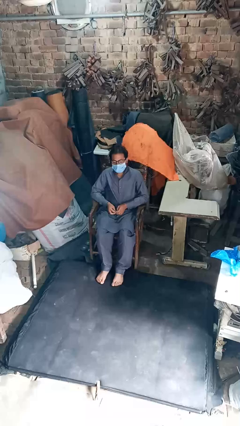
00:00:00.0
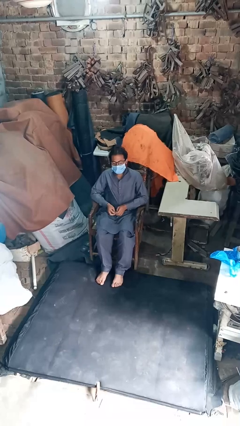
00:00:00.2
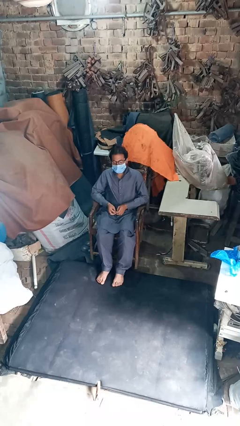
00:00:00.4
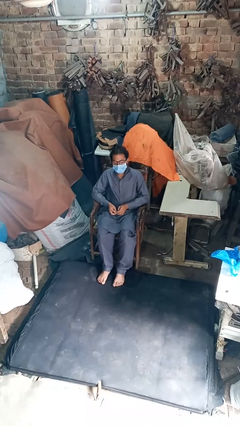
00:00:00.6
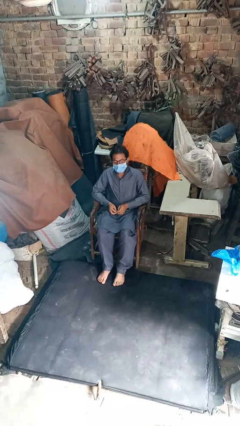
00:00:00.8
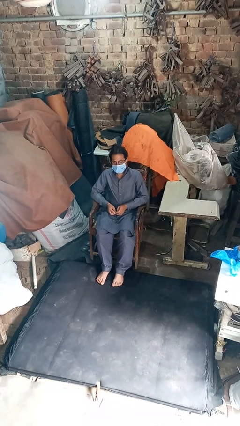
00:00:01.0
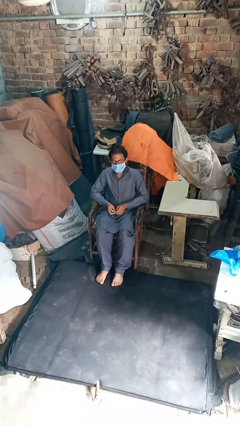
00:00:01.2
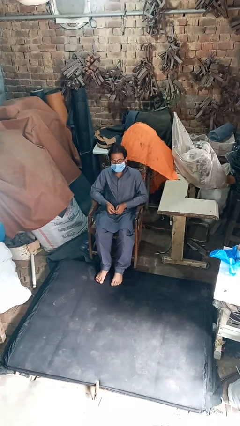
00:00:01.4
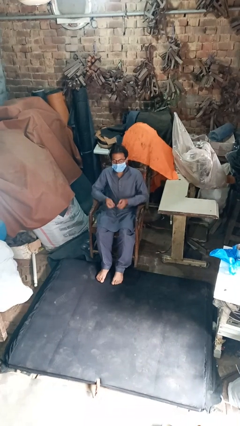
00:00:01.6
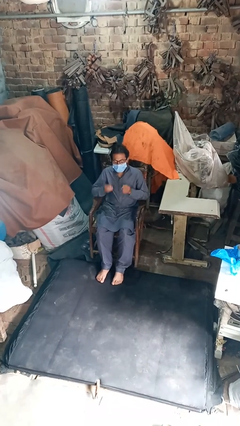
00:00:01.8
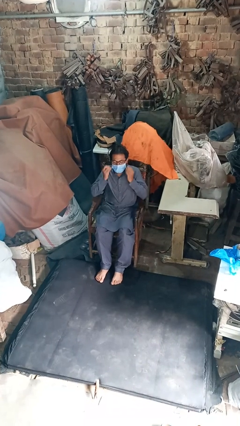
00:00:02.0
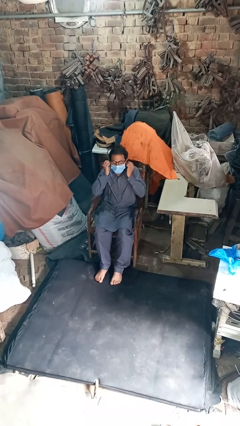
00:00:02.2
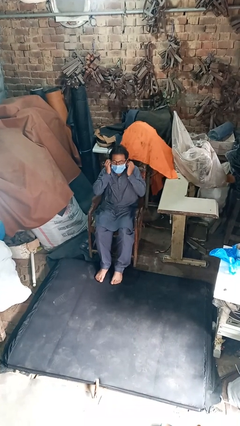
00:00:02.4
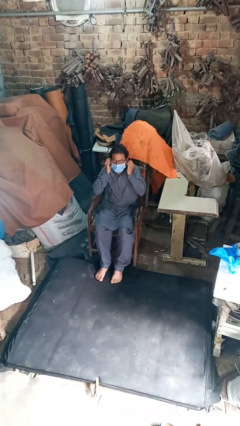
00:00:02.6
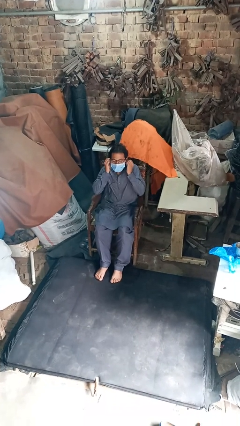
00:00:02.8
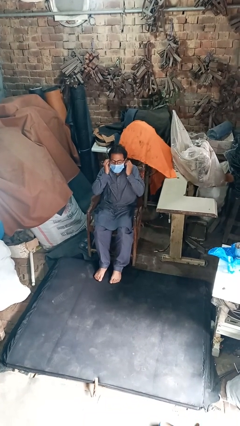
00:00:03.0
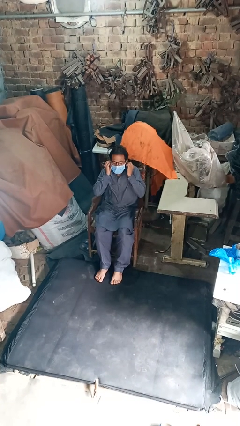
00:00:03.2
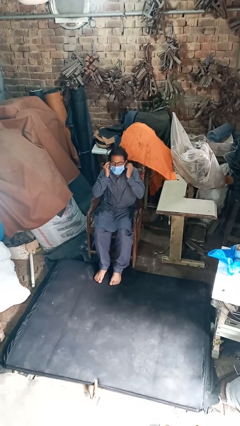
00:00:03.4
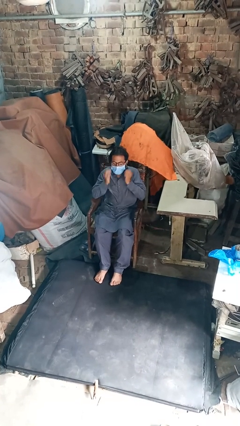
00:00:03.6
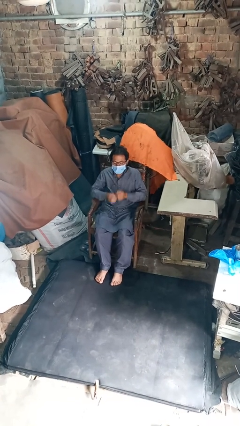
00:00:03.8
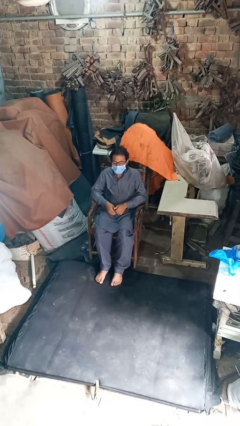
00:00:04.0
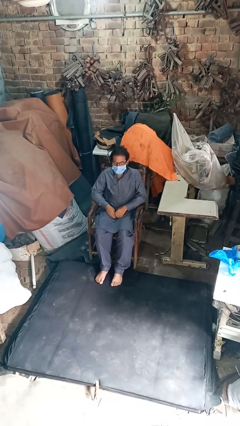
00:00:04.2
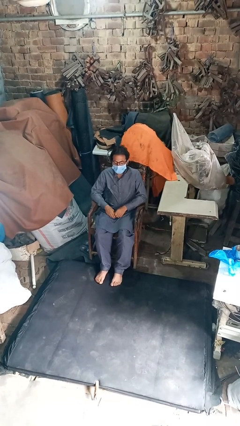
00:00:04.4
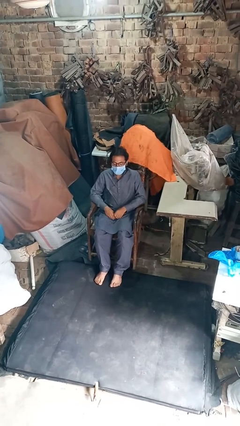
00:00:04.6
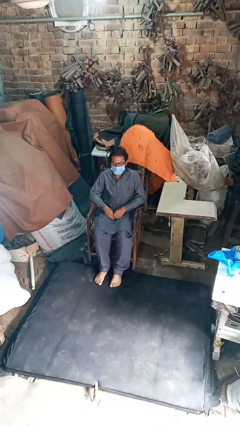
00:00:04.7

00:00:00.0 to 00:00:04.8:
person puts on headphones

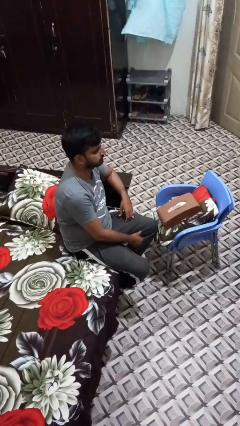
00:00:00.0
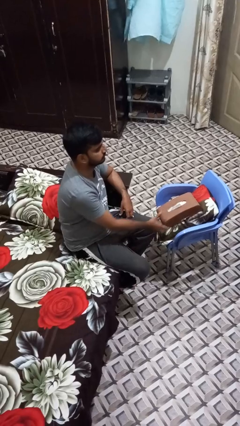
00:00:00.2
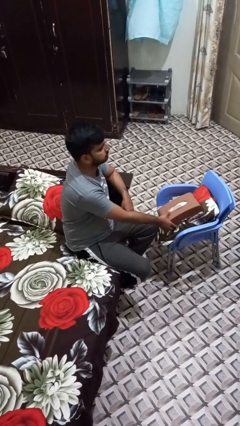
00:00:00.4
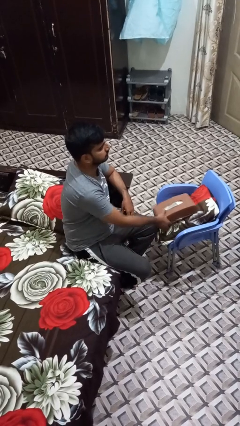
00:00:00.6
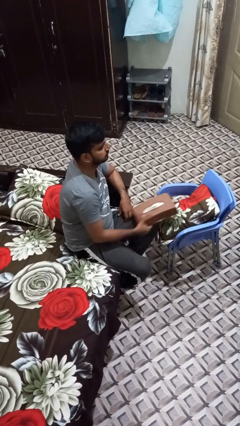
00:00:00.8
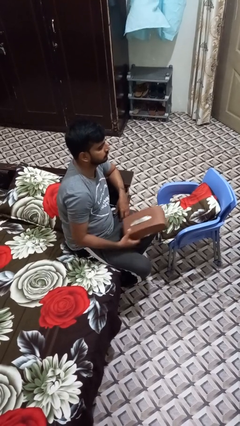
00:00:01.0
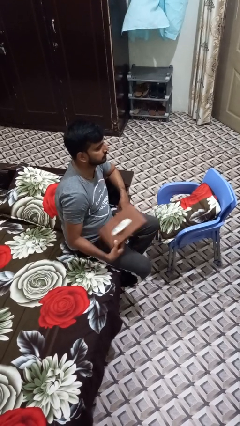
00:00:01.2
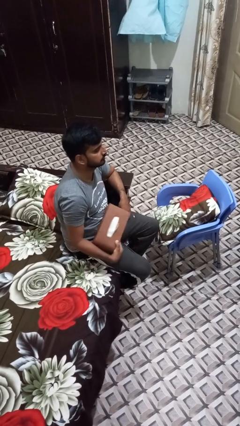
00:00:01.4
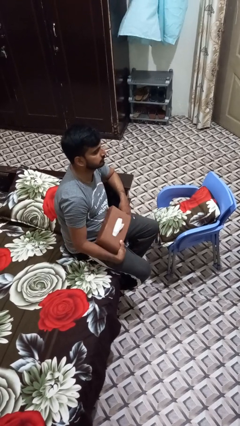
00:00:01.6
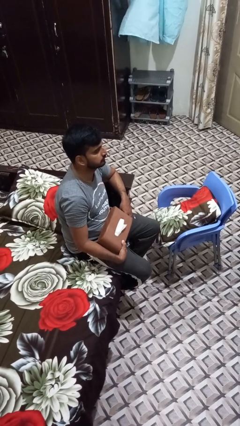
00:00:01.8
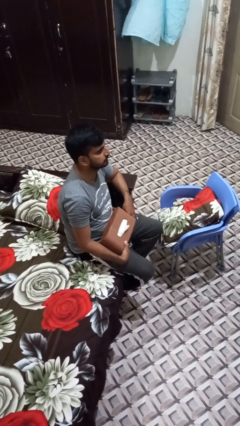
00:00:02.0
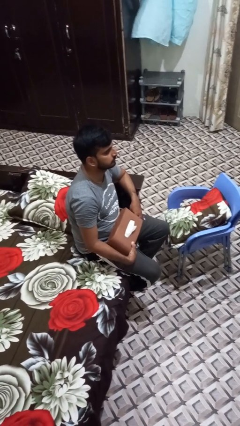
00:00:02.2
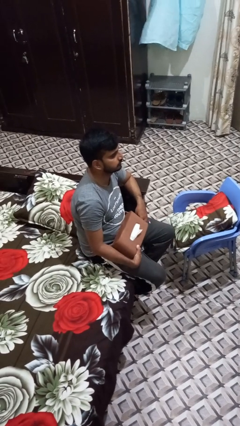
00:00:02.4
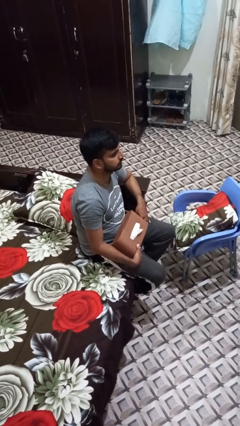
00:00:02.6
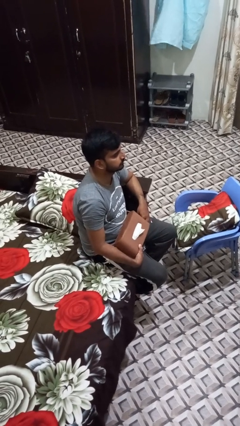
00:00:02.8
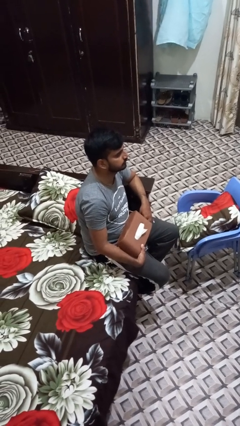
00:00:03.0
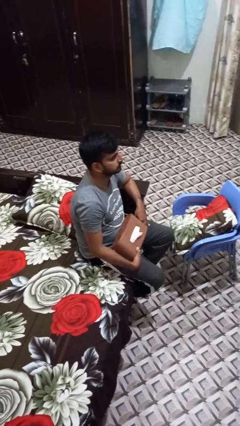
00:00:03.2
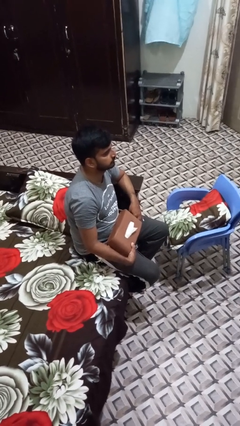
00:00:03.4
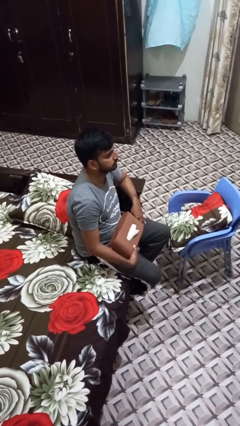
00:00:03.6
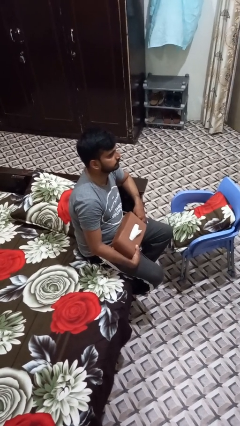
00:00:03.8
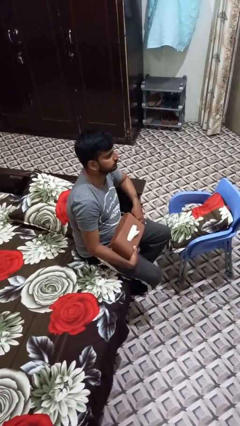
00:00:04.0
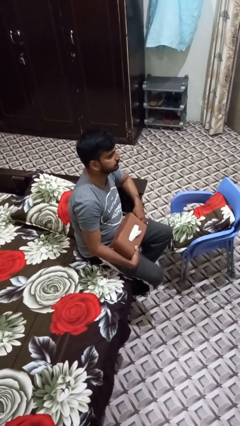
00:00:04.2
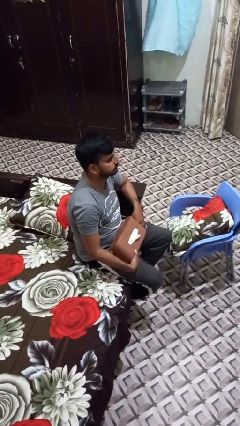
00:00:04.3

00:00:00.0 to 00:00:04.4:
person picks up object from couch

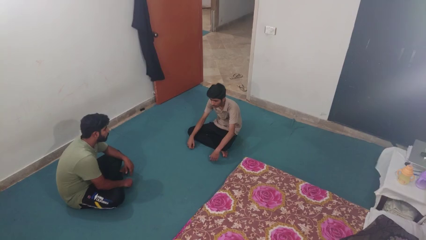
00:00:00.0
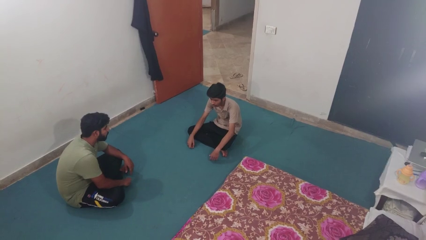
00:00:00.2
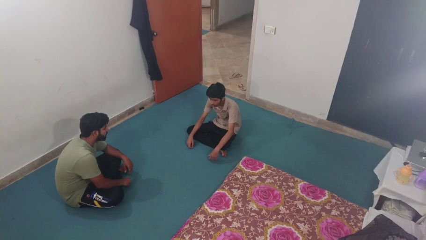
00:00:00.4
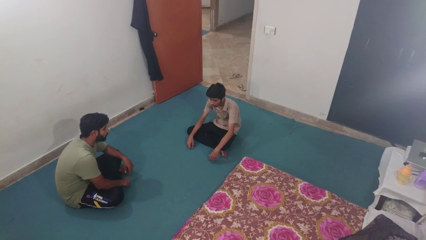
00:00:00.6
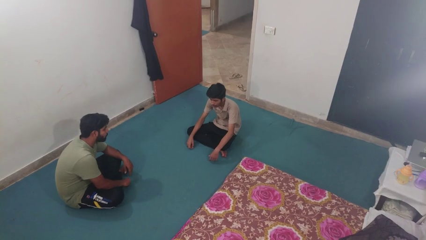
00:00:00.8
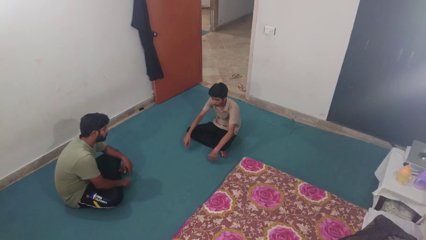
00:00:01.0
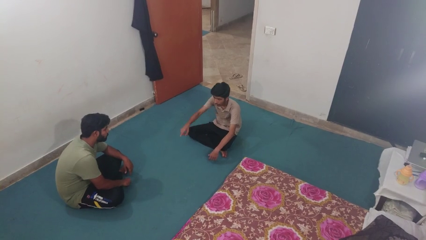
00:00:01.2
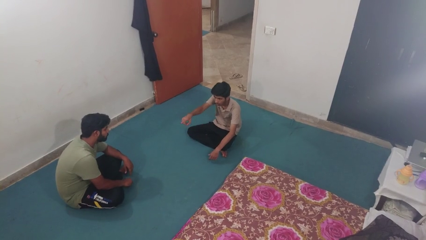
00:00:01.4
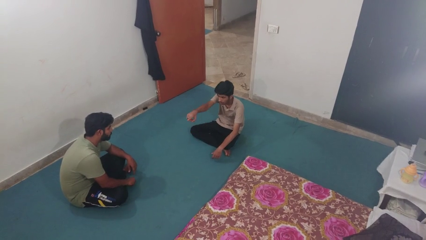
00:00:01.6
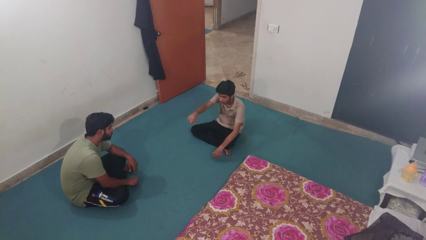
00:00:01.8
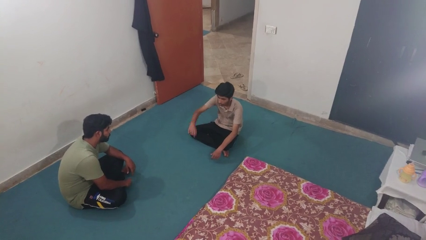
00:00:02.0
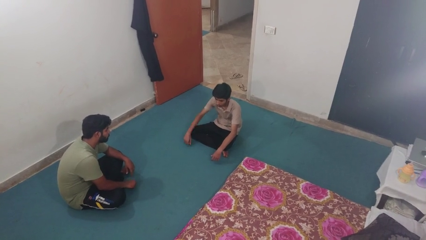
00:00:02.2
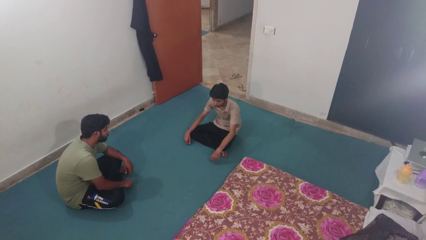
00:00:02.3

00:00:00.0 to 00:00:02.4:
person points at person

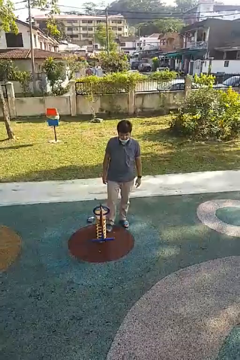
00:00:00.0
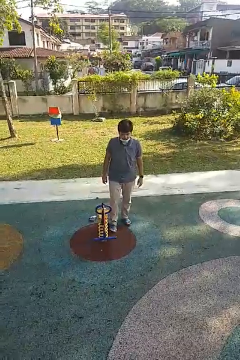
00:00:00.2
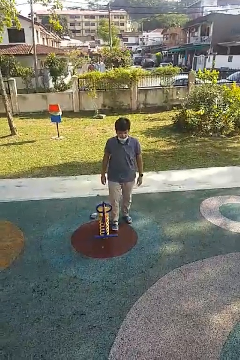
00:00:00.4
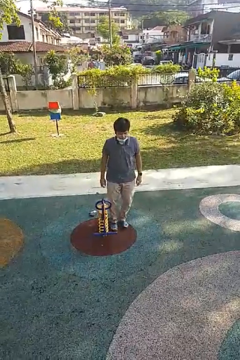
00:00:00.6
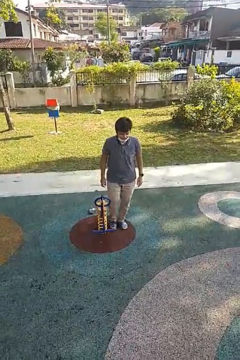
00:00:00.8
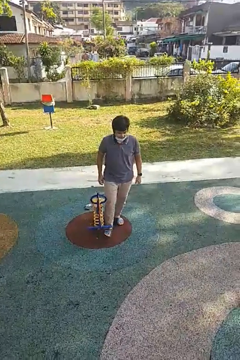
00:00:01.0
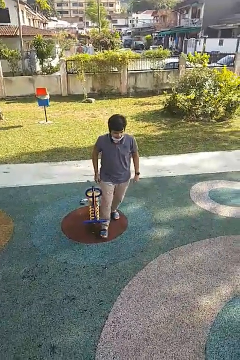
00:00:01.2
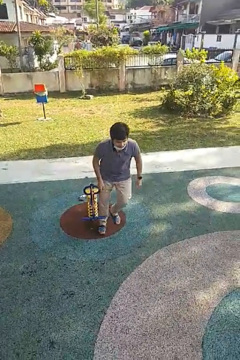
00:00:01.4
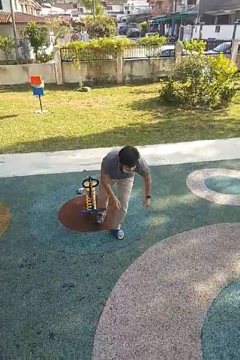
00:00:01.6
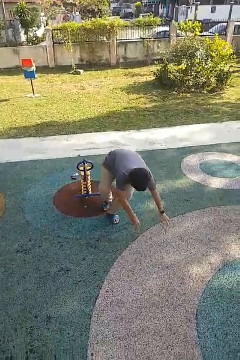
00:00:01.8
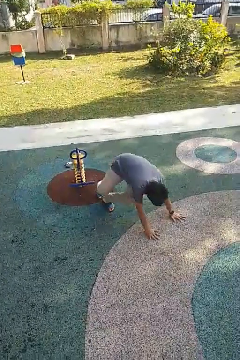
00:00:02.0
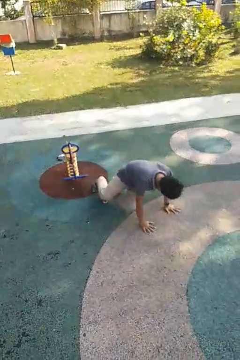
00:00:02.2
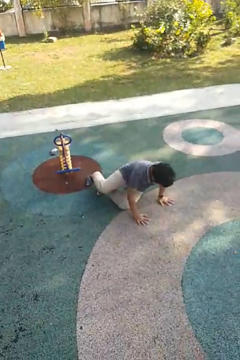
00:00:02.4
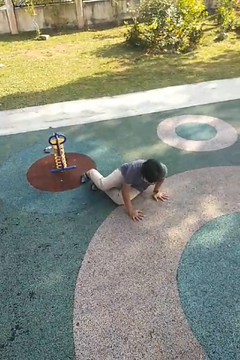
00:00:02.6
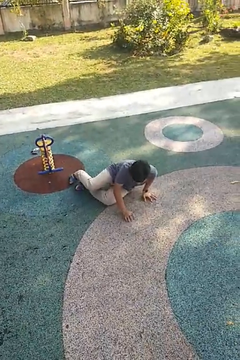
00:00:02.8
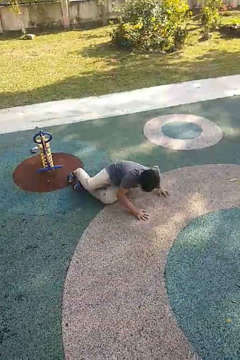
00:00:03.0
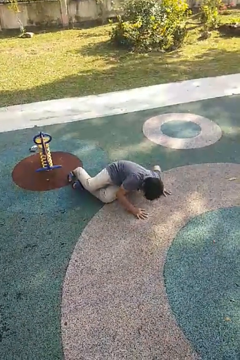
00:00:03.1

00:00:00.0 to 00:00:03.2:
person trips on object on floor

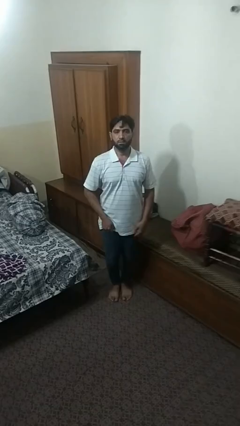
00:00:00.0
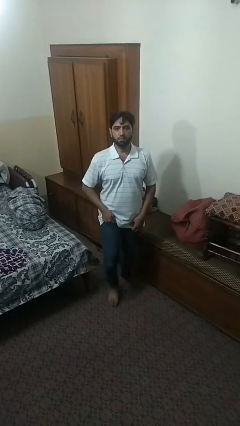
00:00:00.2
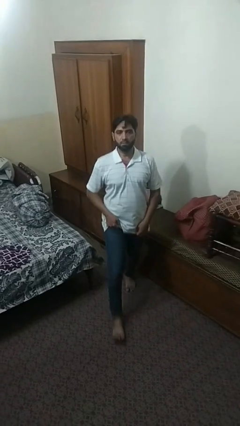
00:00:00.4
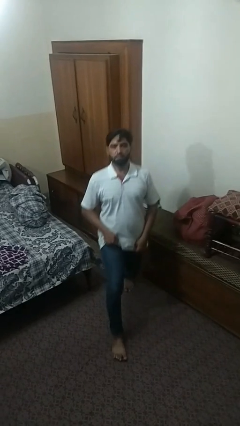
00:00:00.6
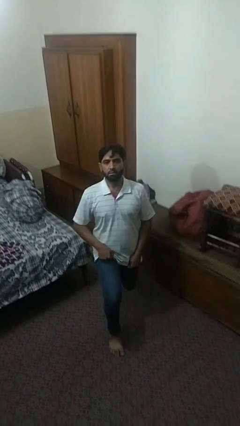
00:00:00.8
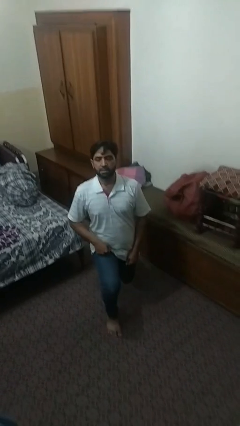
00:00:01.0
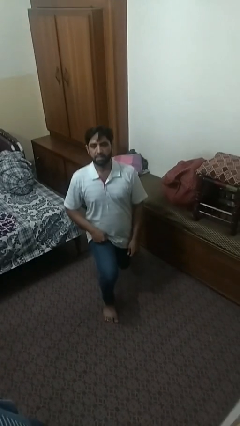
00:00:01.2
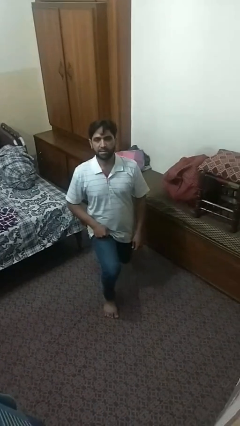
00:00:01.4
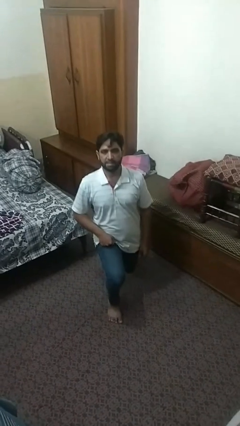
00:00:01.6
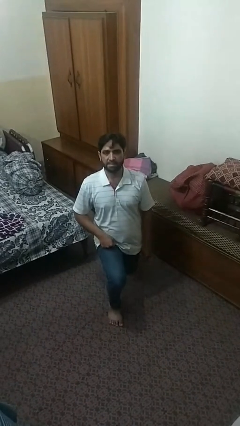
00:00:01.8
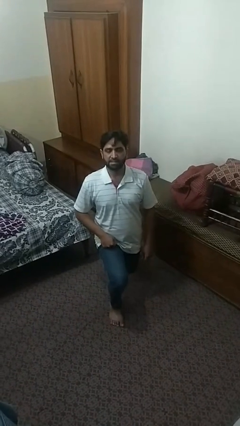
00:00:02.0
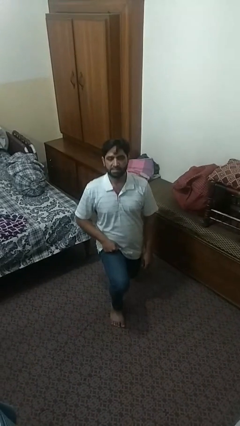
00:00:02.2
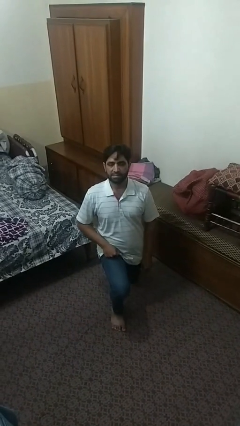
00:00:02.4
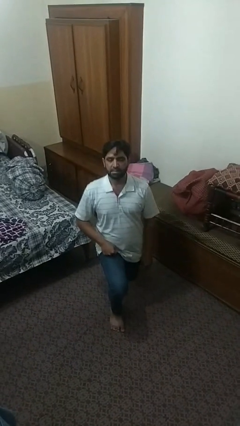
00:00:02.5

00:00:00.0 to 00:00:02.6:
person exercises with lunges

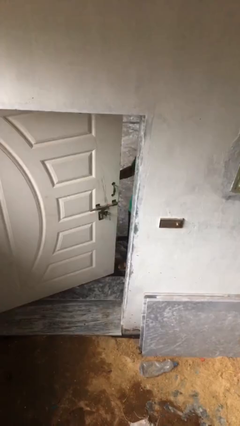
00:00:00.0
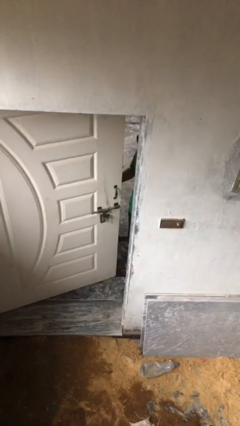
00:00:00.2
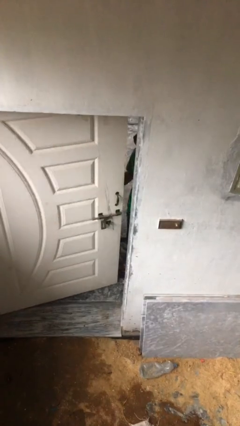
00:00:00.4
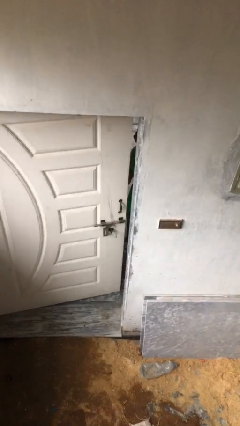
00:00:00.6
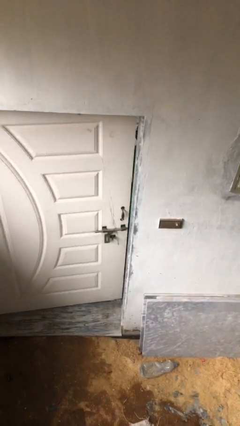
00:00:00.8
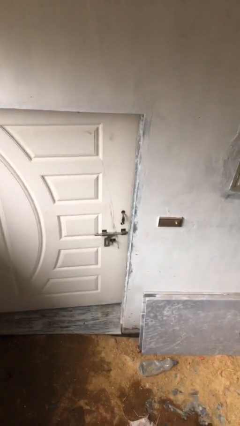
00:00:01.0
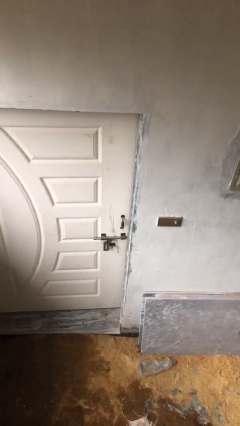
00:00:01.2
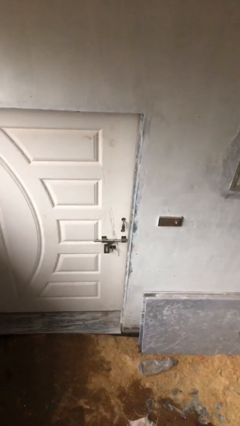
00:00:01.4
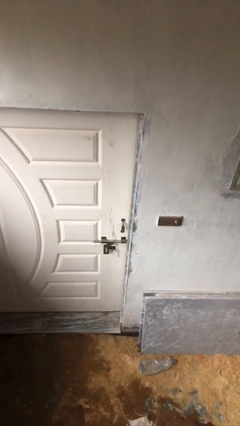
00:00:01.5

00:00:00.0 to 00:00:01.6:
person closes facility door
